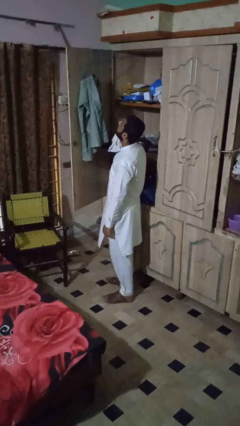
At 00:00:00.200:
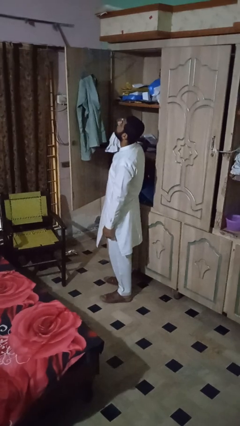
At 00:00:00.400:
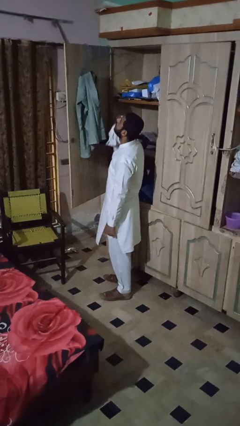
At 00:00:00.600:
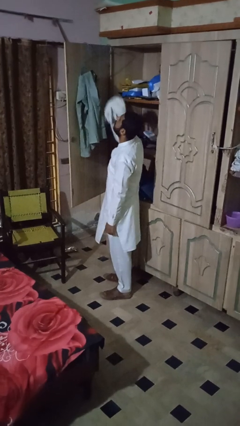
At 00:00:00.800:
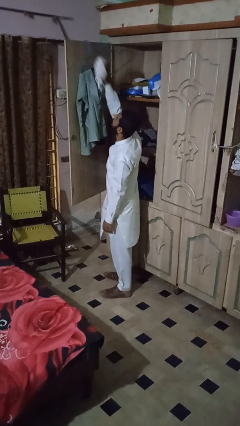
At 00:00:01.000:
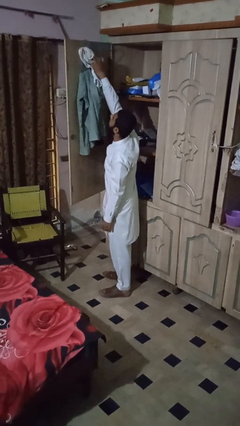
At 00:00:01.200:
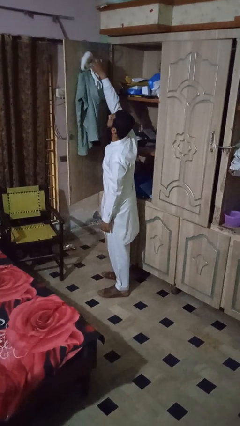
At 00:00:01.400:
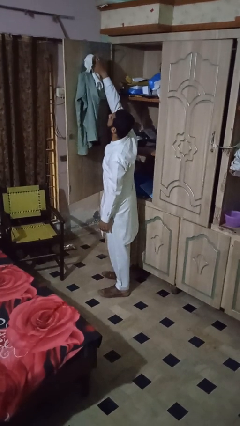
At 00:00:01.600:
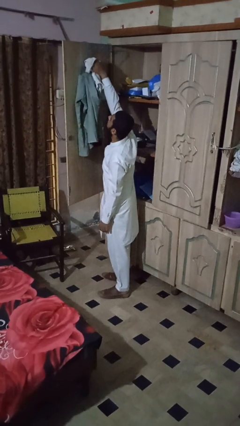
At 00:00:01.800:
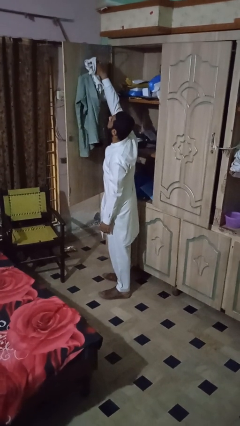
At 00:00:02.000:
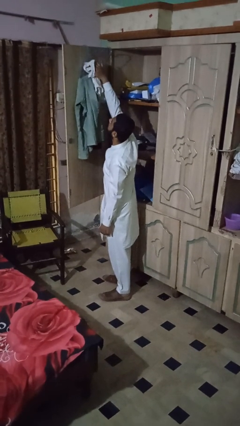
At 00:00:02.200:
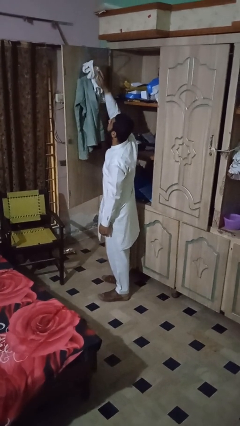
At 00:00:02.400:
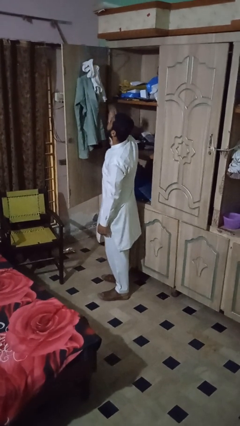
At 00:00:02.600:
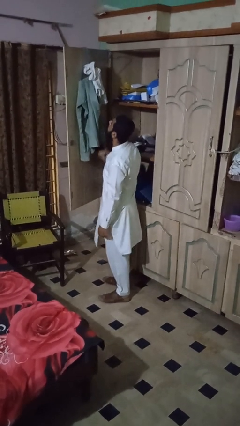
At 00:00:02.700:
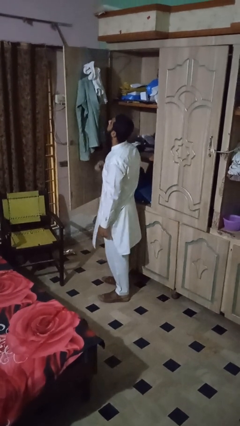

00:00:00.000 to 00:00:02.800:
person puts clothes into closet

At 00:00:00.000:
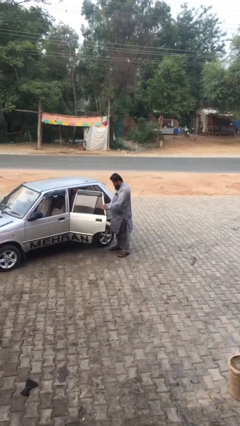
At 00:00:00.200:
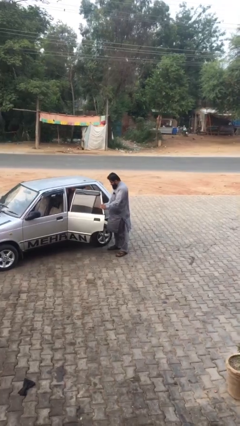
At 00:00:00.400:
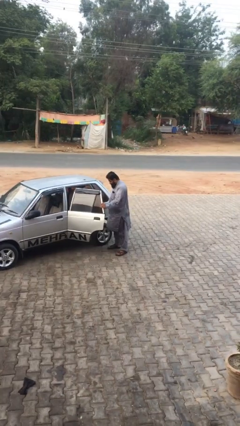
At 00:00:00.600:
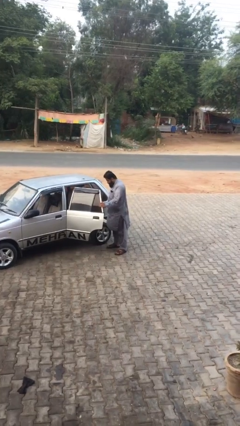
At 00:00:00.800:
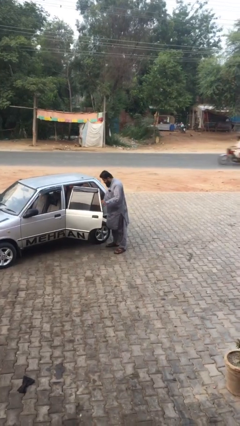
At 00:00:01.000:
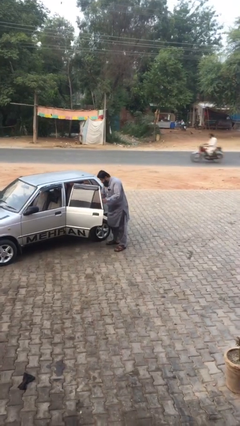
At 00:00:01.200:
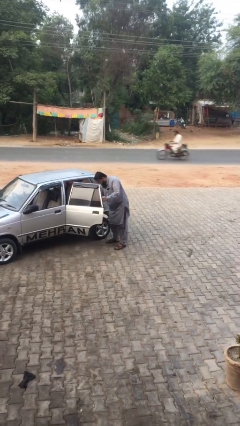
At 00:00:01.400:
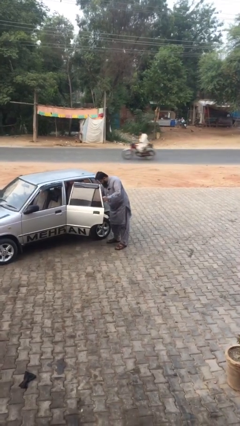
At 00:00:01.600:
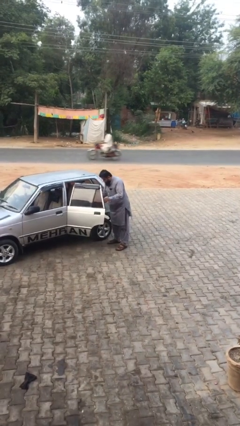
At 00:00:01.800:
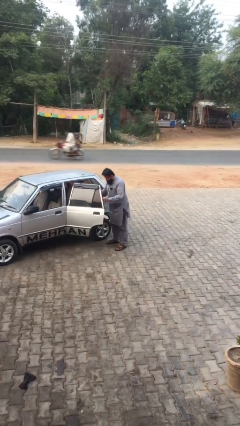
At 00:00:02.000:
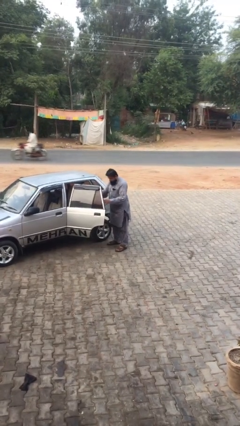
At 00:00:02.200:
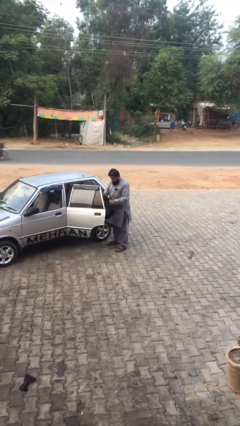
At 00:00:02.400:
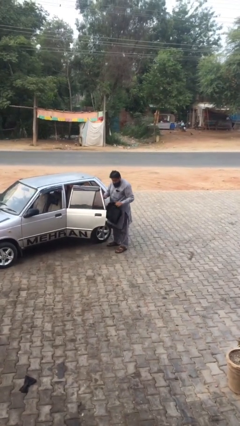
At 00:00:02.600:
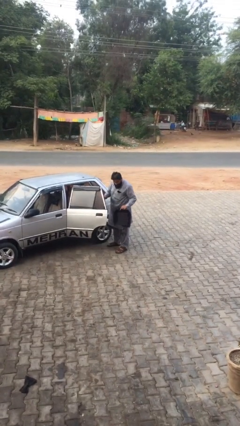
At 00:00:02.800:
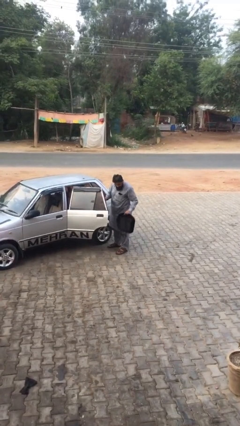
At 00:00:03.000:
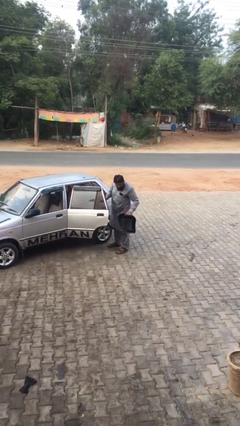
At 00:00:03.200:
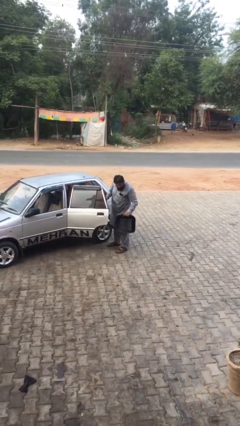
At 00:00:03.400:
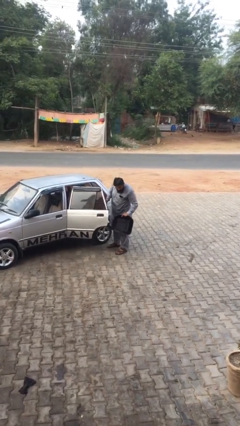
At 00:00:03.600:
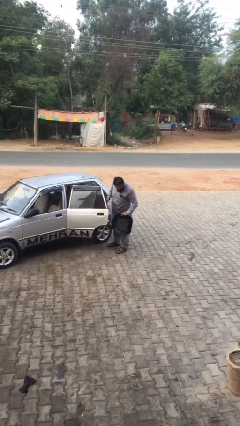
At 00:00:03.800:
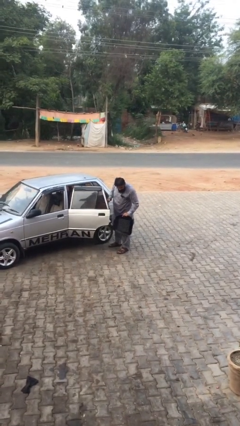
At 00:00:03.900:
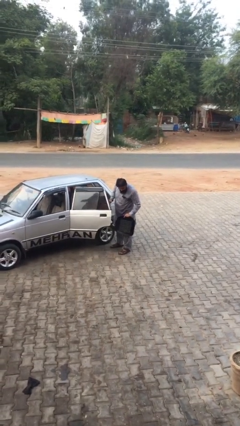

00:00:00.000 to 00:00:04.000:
person unloads car

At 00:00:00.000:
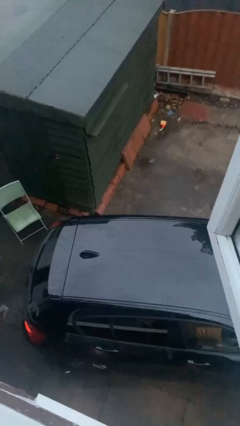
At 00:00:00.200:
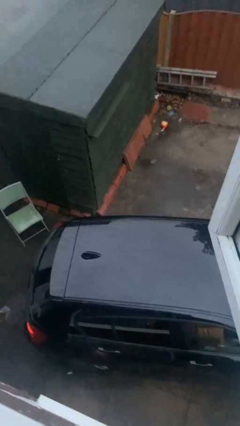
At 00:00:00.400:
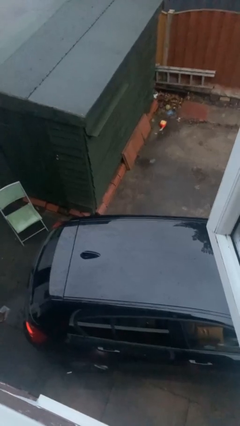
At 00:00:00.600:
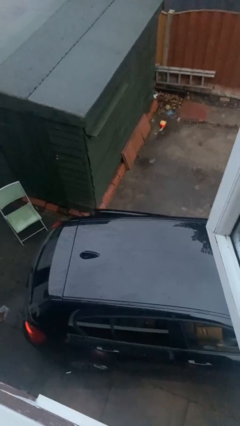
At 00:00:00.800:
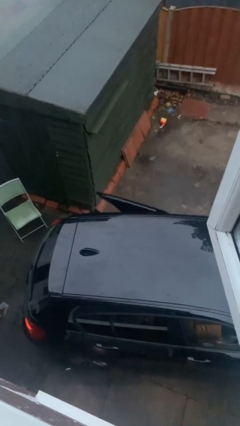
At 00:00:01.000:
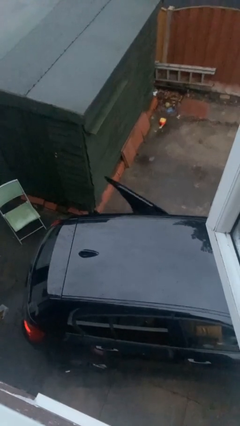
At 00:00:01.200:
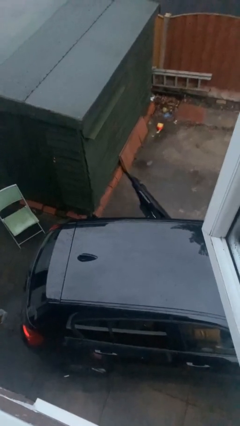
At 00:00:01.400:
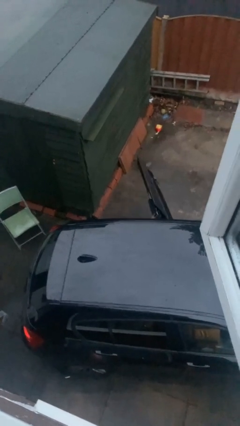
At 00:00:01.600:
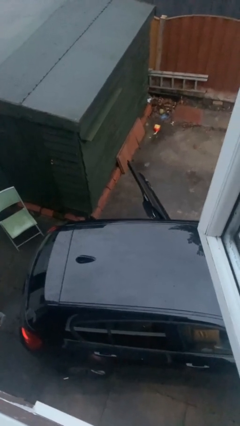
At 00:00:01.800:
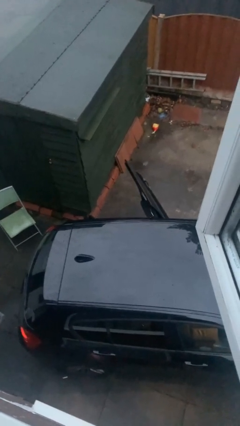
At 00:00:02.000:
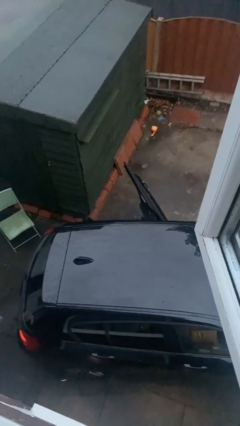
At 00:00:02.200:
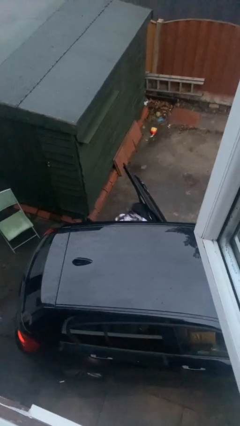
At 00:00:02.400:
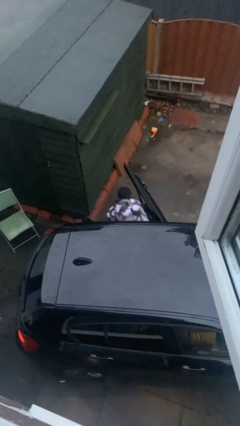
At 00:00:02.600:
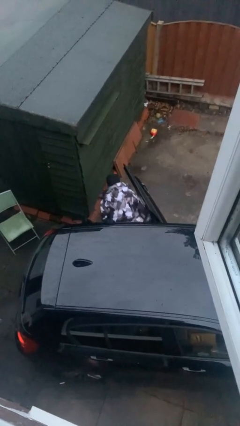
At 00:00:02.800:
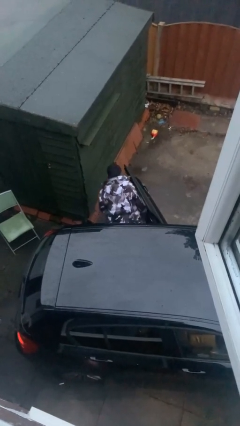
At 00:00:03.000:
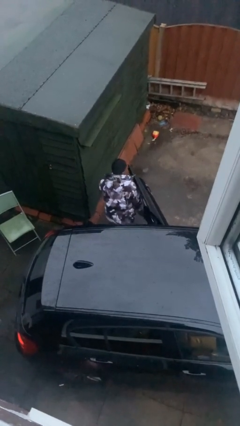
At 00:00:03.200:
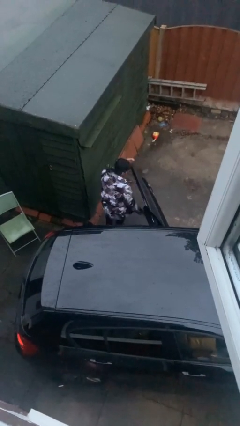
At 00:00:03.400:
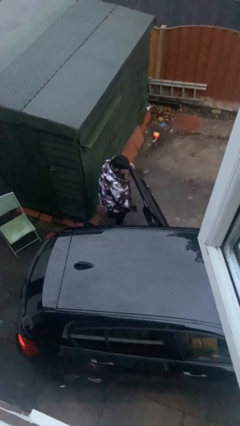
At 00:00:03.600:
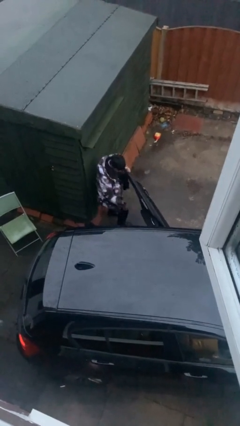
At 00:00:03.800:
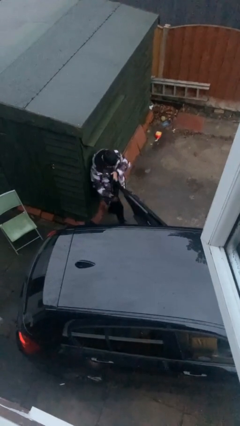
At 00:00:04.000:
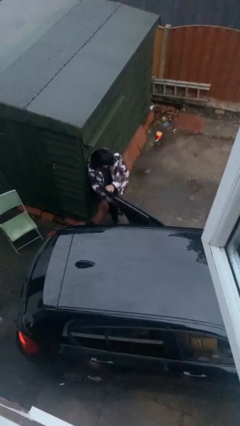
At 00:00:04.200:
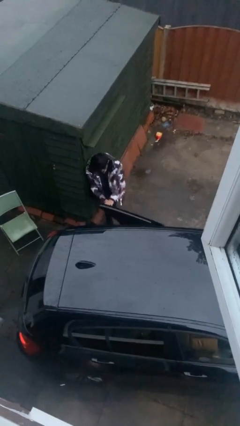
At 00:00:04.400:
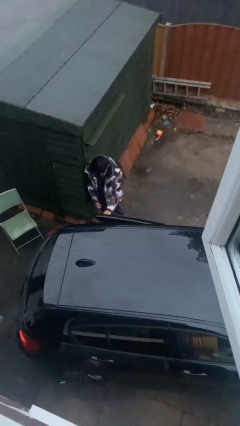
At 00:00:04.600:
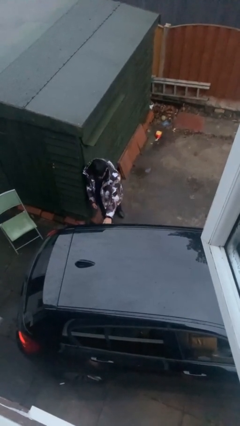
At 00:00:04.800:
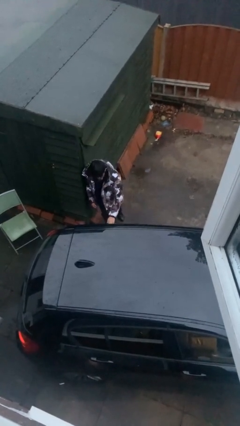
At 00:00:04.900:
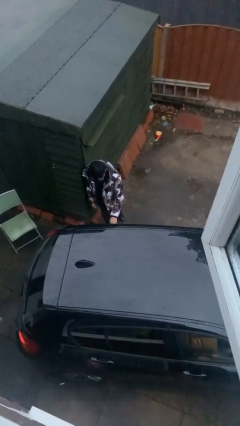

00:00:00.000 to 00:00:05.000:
car drops off person

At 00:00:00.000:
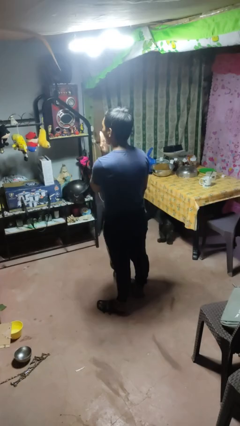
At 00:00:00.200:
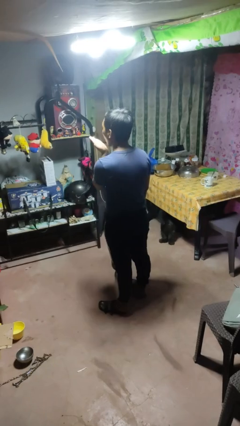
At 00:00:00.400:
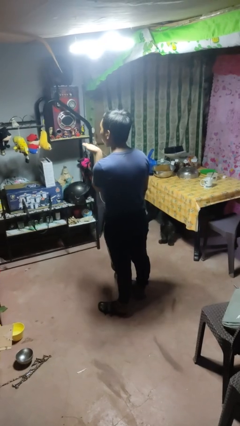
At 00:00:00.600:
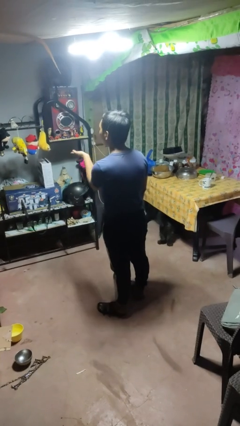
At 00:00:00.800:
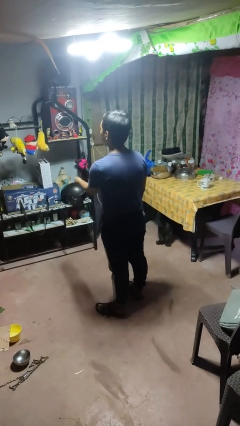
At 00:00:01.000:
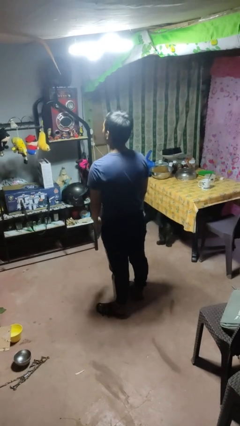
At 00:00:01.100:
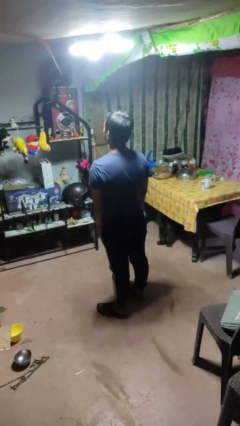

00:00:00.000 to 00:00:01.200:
person gestures blow kiss

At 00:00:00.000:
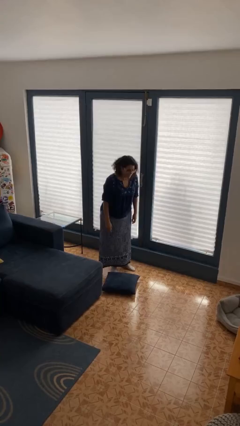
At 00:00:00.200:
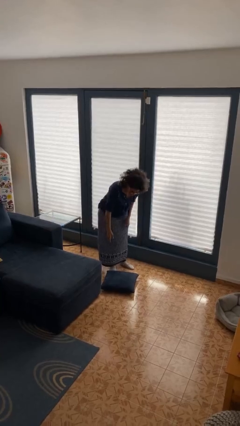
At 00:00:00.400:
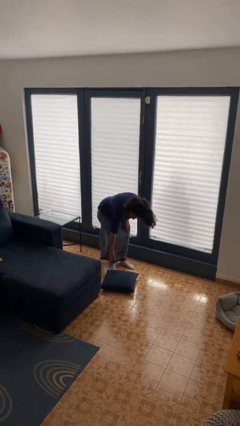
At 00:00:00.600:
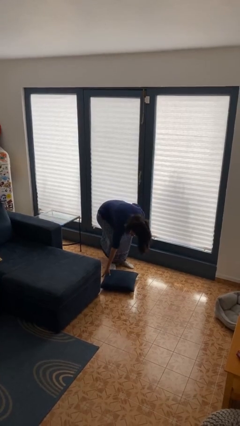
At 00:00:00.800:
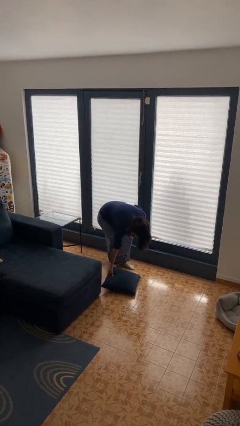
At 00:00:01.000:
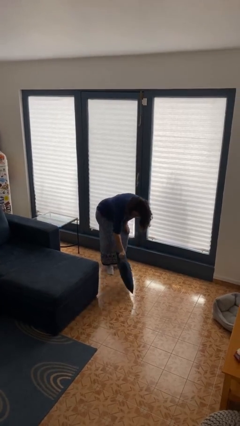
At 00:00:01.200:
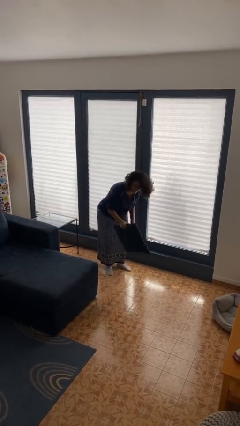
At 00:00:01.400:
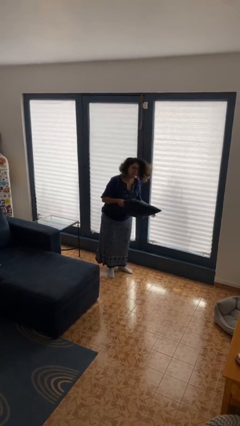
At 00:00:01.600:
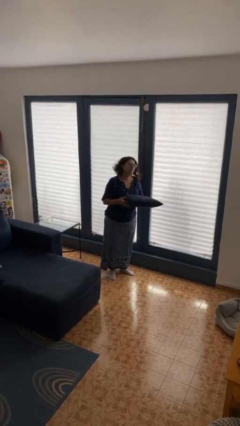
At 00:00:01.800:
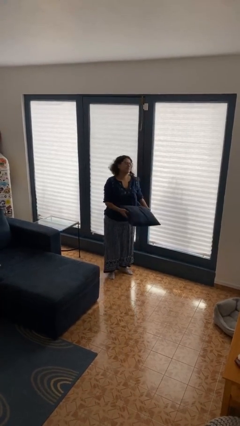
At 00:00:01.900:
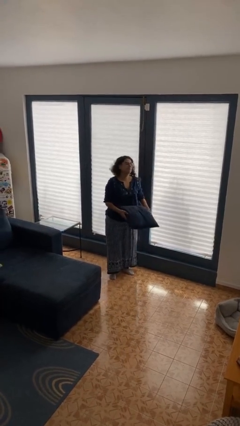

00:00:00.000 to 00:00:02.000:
person picks up object from floor

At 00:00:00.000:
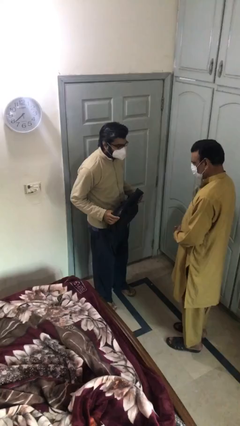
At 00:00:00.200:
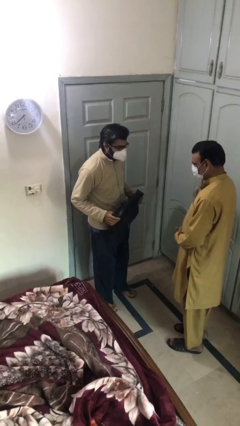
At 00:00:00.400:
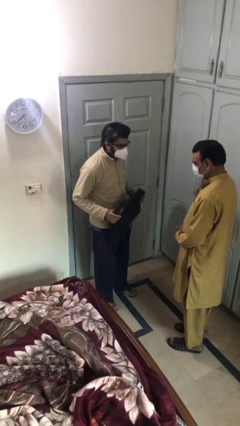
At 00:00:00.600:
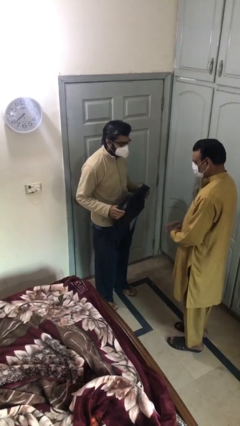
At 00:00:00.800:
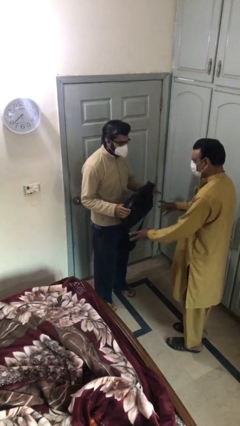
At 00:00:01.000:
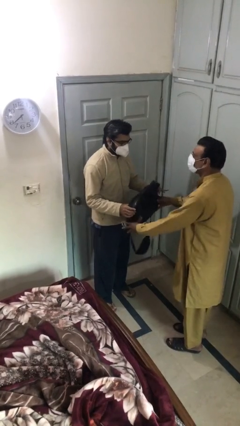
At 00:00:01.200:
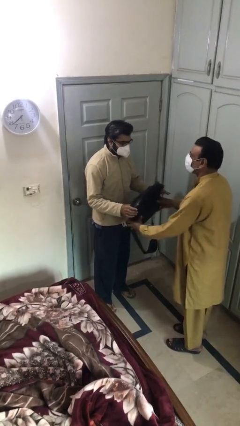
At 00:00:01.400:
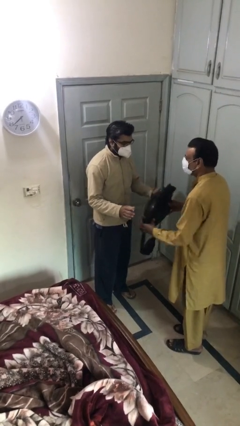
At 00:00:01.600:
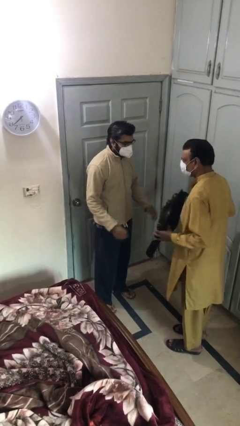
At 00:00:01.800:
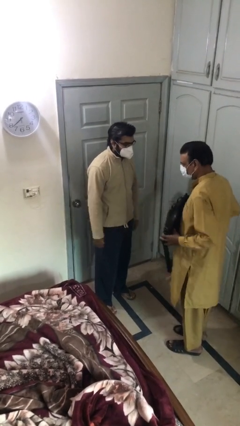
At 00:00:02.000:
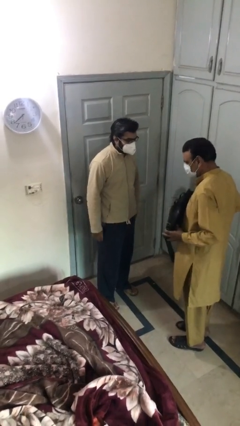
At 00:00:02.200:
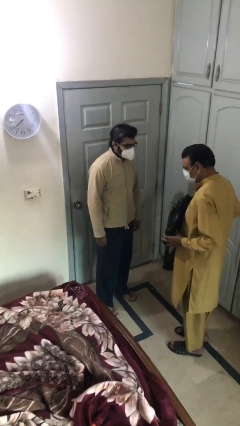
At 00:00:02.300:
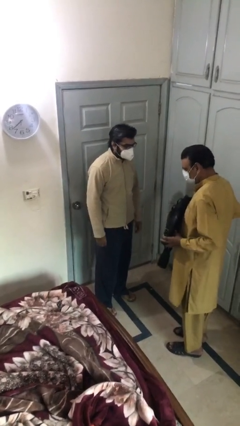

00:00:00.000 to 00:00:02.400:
person transfers object to person
